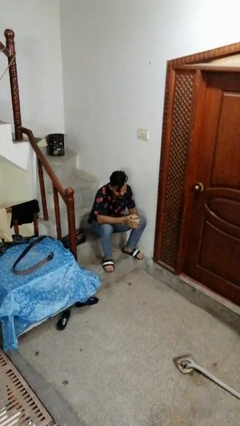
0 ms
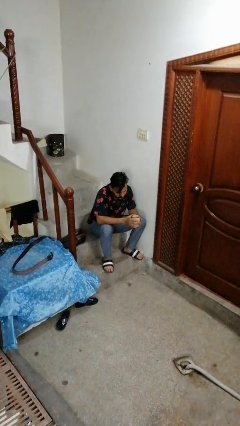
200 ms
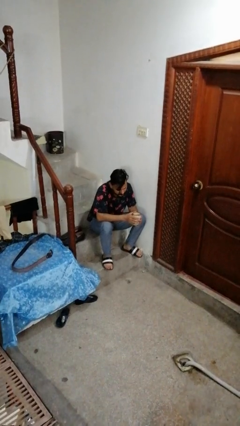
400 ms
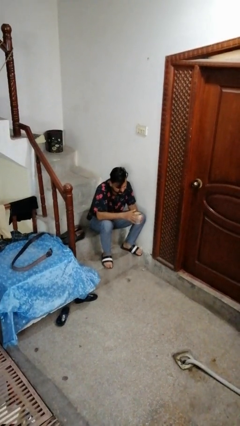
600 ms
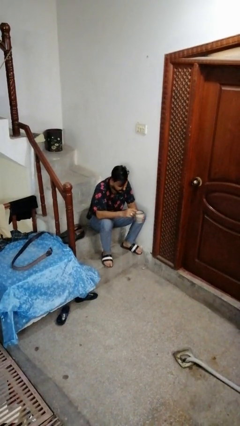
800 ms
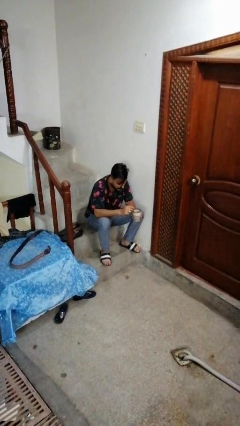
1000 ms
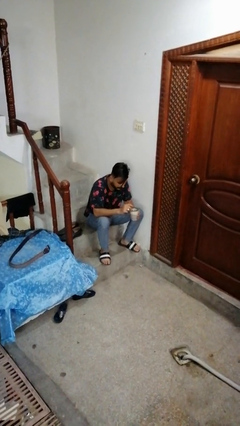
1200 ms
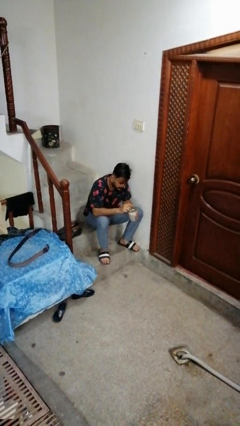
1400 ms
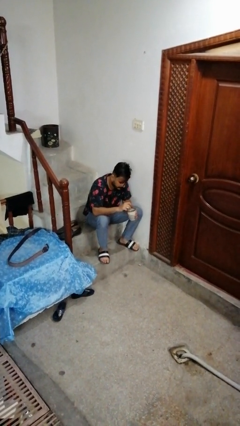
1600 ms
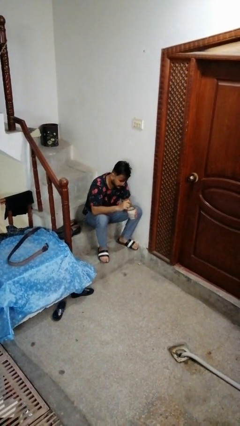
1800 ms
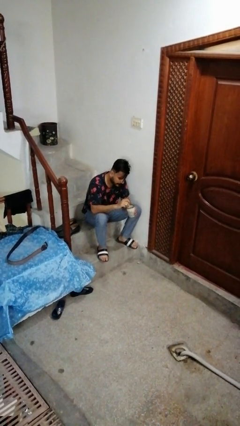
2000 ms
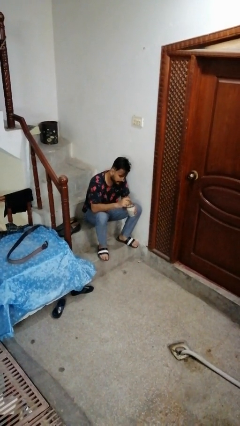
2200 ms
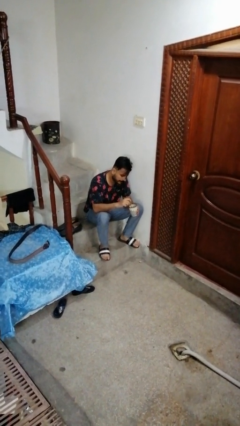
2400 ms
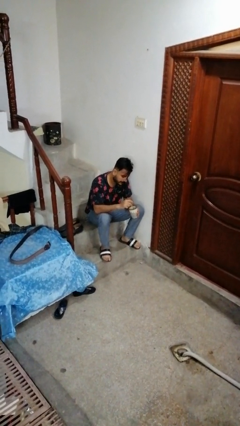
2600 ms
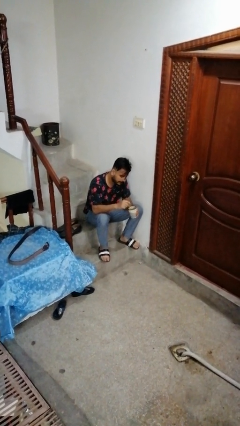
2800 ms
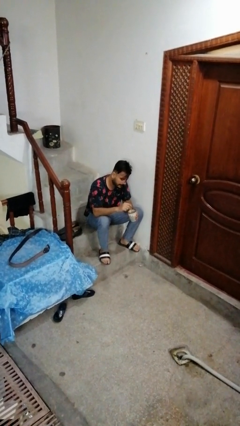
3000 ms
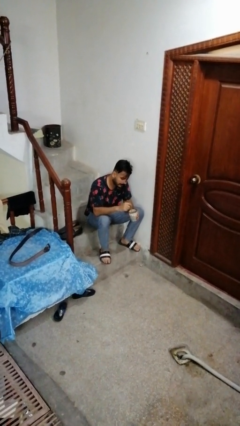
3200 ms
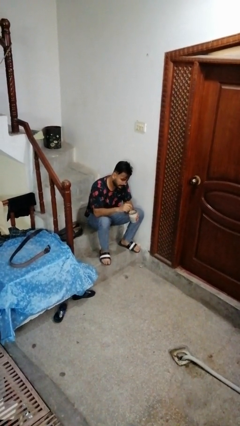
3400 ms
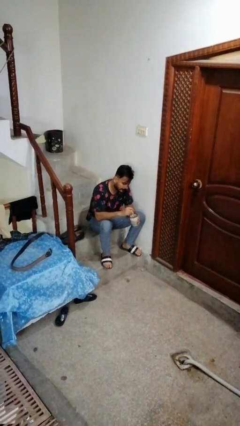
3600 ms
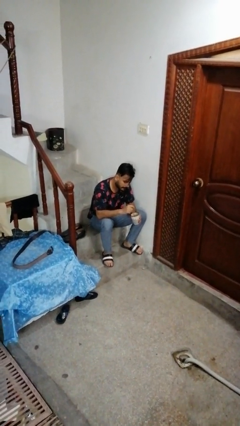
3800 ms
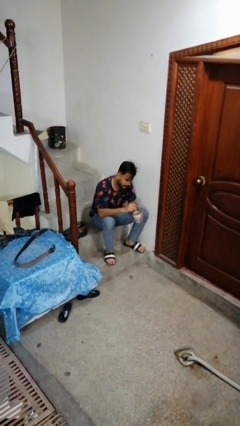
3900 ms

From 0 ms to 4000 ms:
person stirs mug

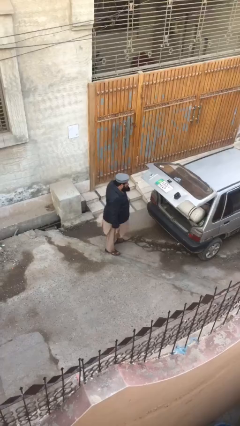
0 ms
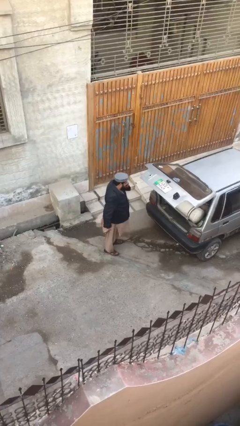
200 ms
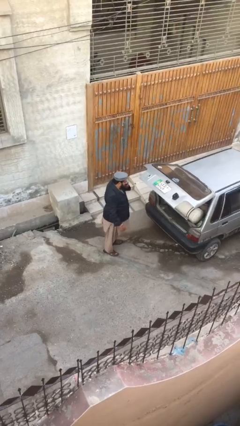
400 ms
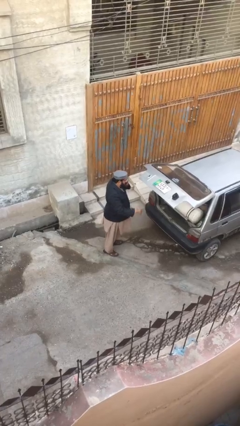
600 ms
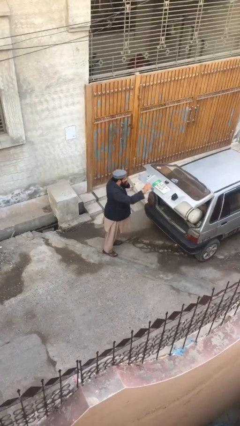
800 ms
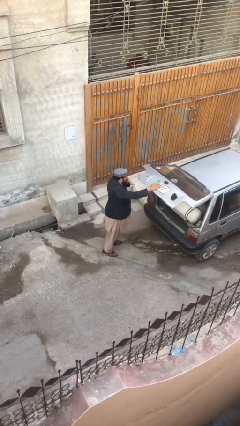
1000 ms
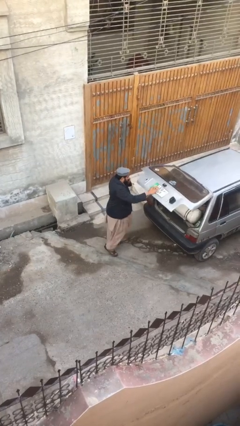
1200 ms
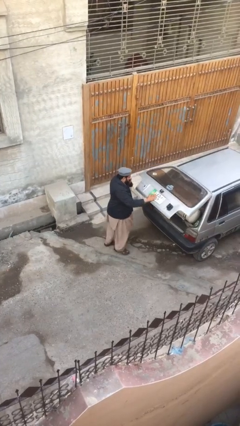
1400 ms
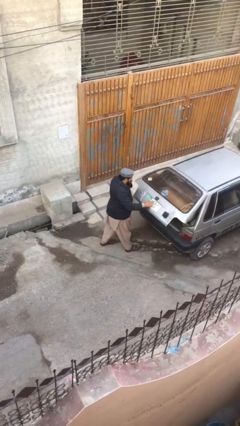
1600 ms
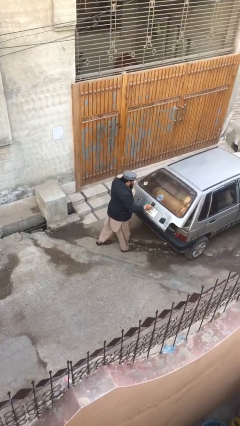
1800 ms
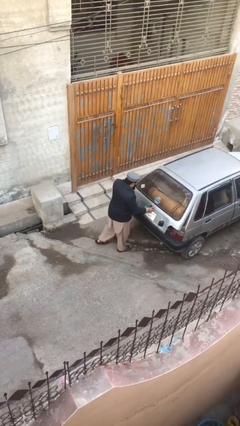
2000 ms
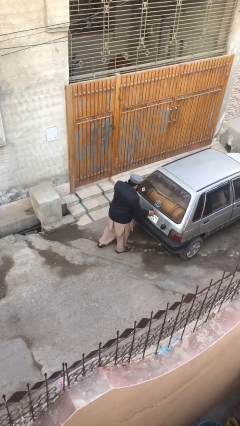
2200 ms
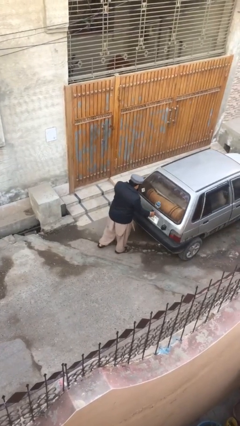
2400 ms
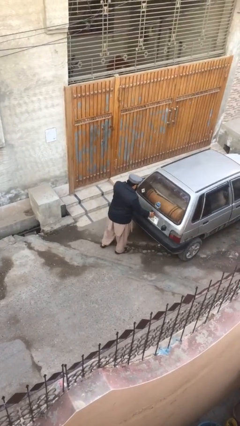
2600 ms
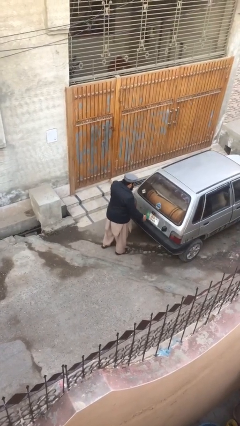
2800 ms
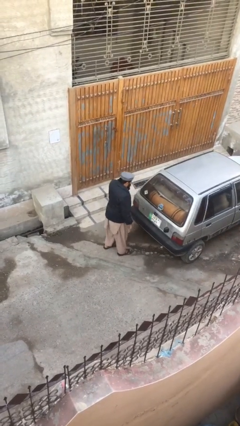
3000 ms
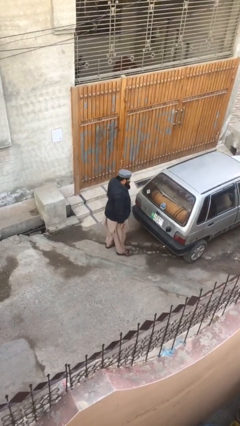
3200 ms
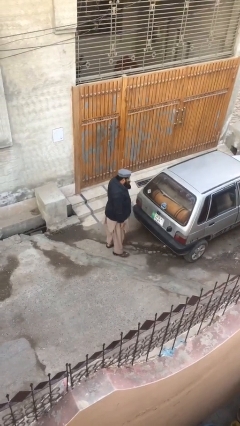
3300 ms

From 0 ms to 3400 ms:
person closes car trunk

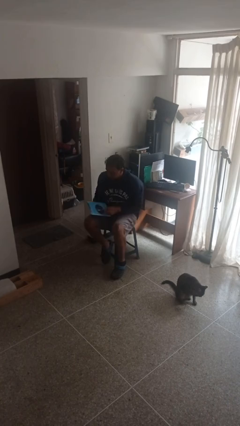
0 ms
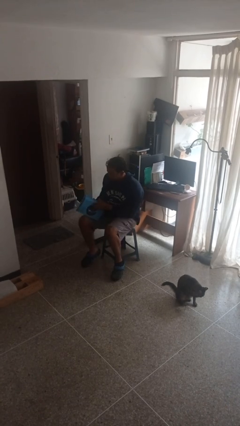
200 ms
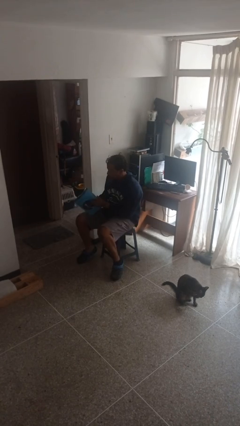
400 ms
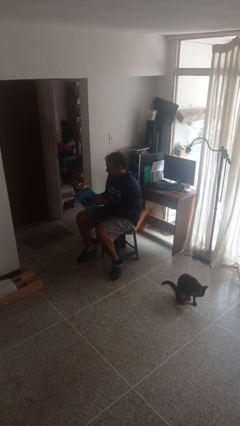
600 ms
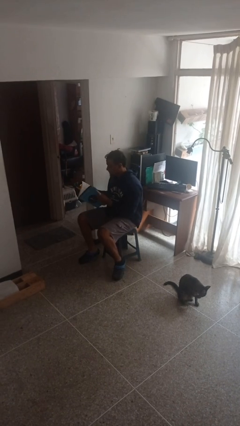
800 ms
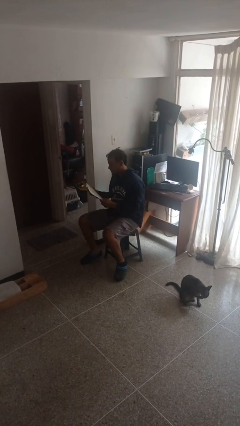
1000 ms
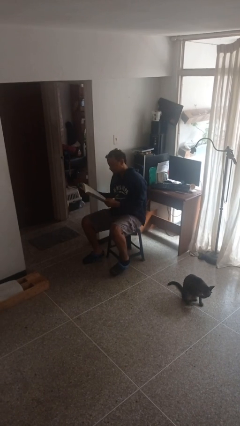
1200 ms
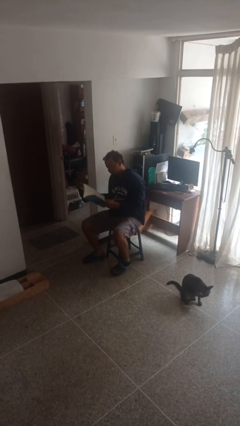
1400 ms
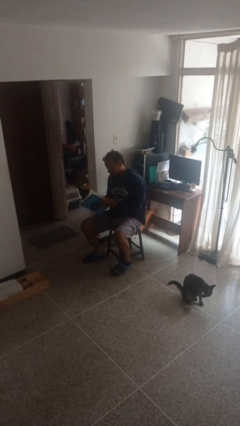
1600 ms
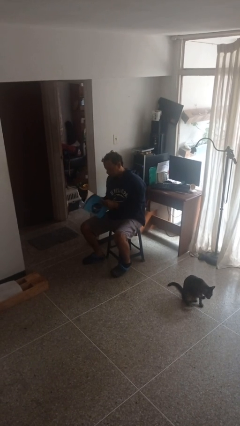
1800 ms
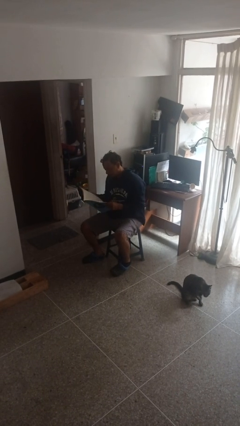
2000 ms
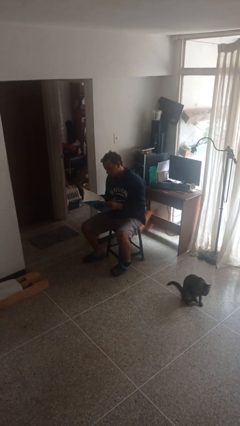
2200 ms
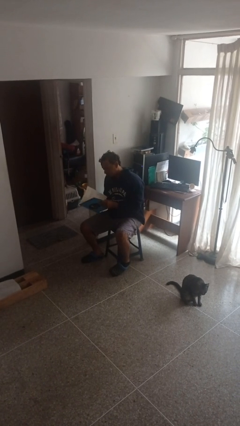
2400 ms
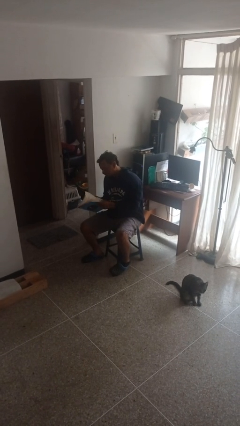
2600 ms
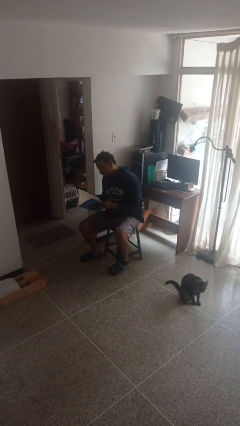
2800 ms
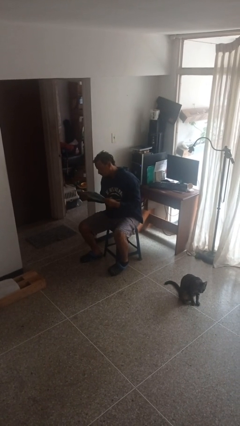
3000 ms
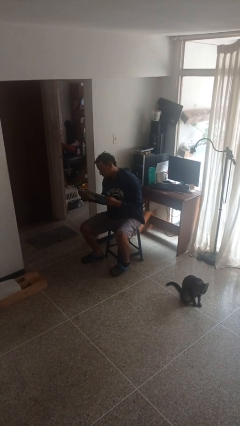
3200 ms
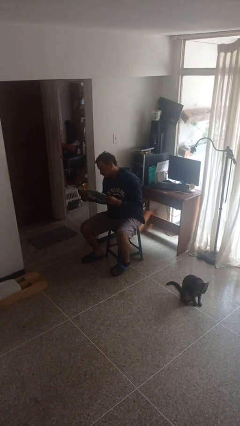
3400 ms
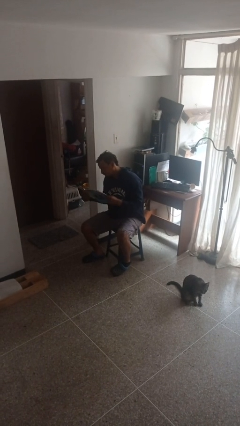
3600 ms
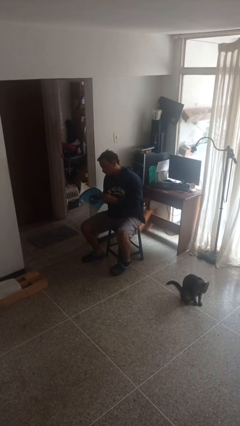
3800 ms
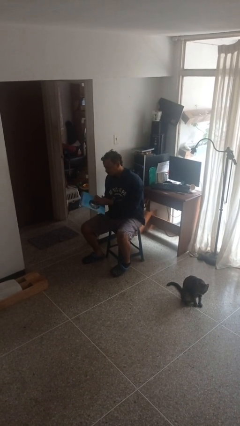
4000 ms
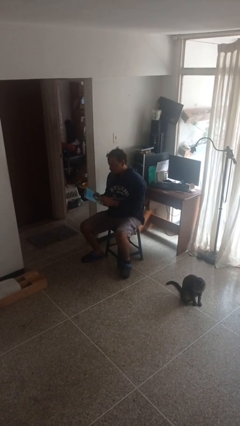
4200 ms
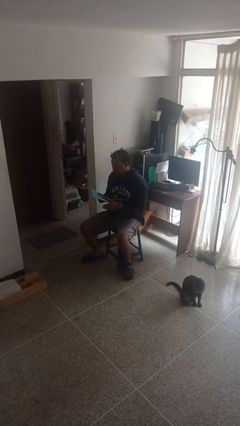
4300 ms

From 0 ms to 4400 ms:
person reads magazine

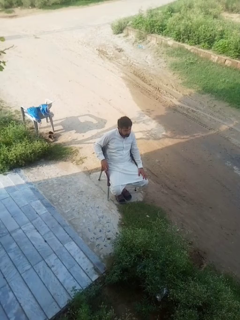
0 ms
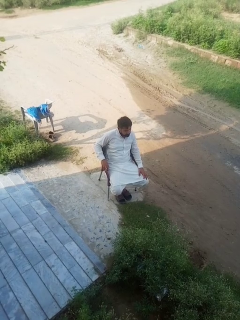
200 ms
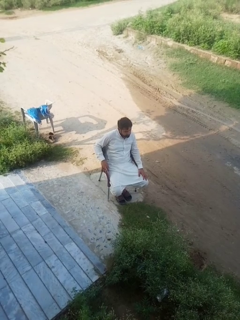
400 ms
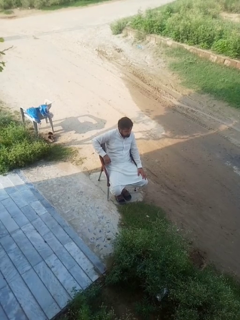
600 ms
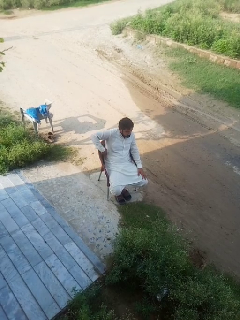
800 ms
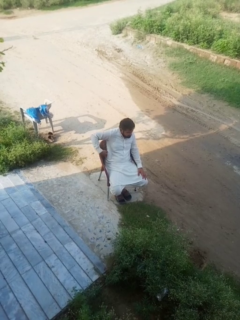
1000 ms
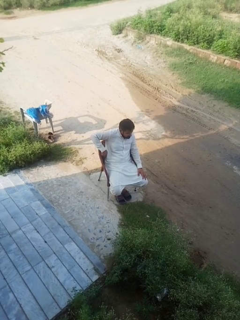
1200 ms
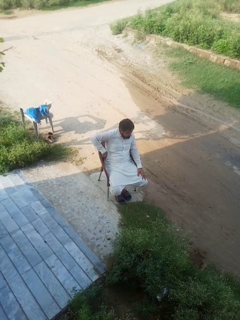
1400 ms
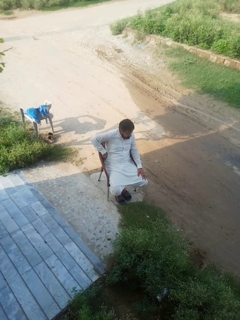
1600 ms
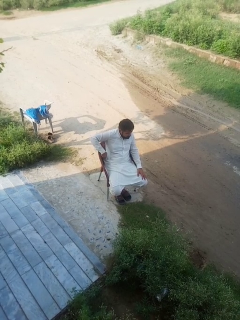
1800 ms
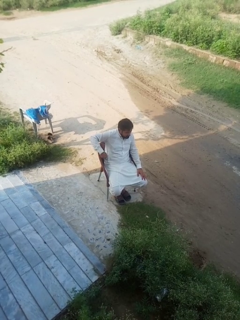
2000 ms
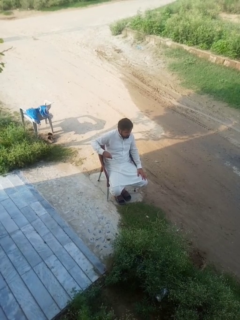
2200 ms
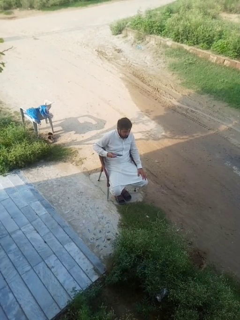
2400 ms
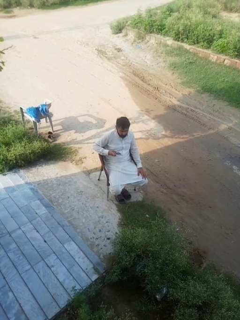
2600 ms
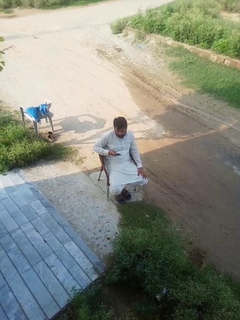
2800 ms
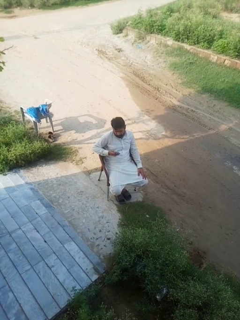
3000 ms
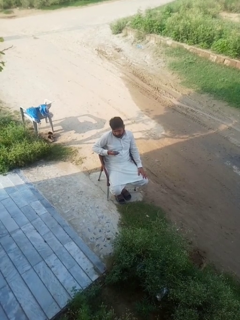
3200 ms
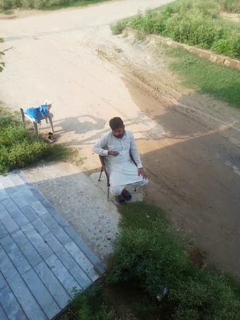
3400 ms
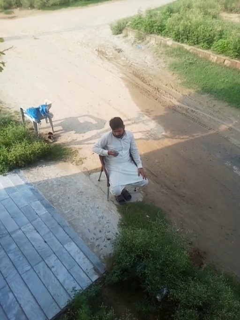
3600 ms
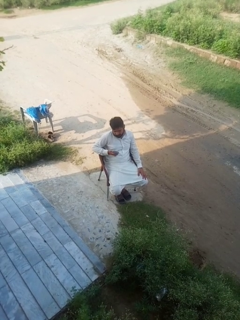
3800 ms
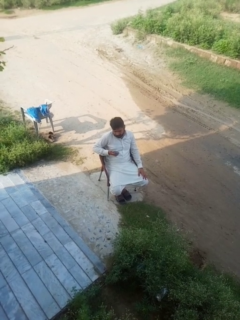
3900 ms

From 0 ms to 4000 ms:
person takes phone from pocket

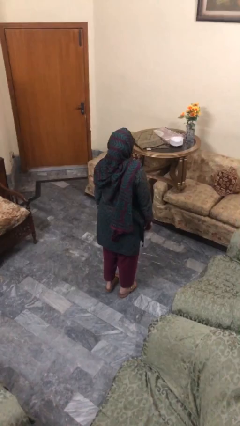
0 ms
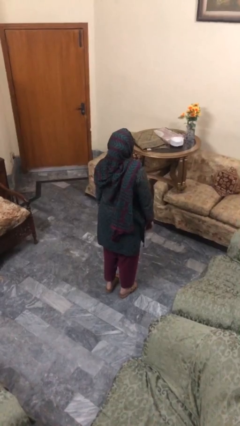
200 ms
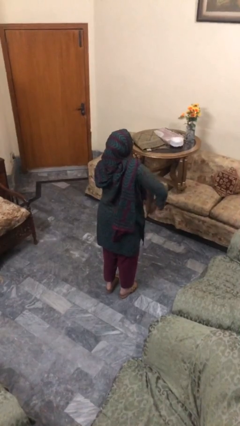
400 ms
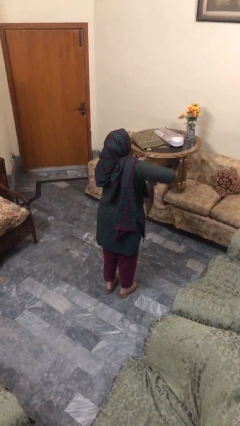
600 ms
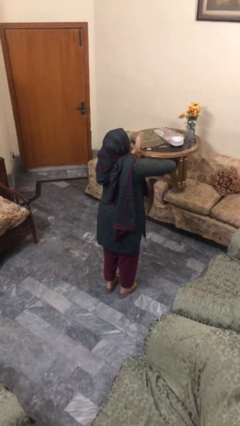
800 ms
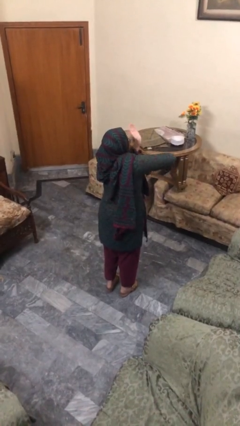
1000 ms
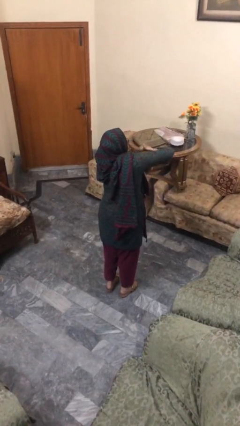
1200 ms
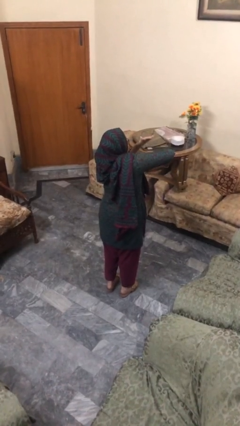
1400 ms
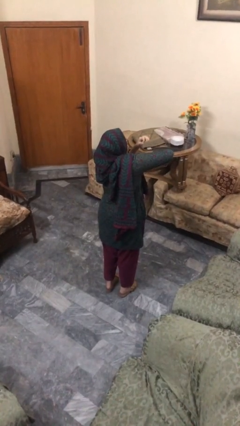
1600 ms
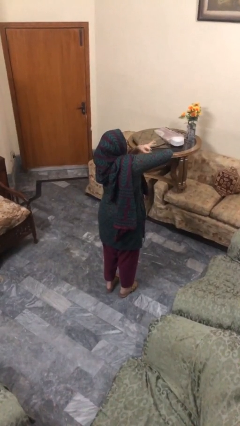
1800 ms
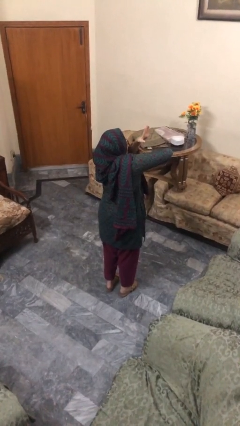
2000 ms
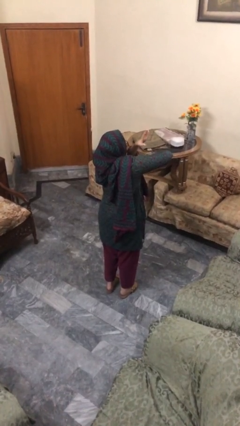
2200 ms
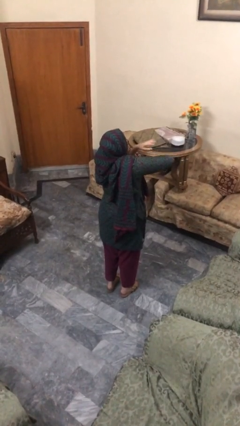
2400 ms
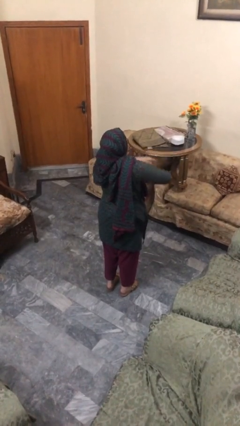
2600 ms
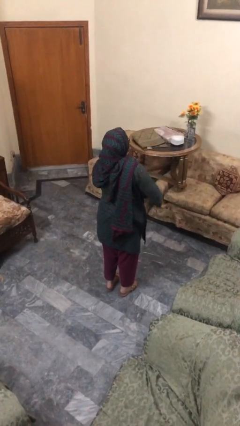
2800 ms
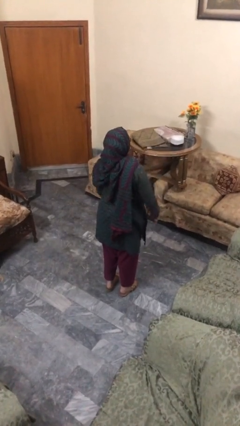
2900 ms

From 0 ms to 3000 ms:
person swats bug
